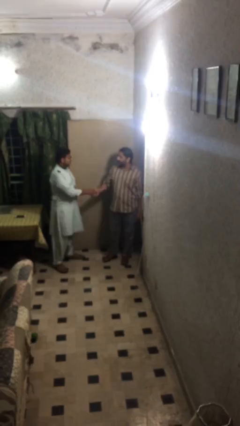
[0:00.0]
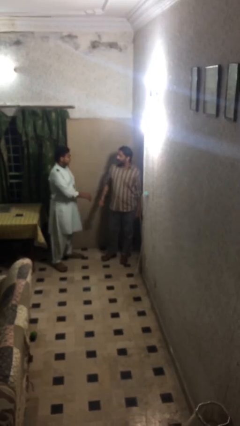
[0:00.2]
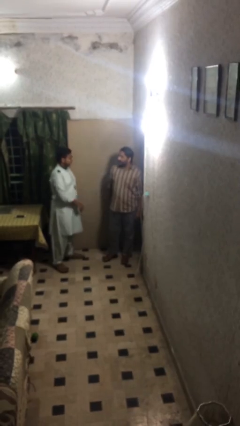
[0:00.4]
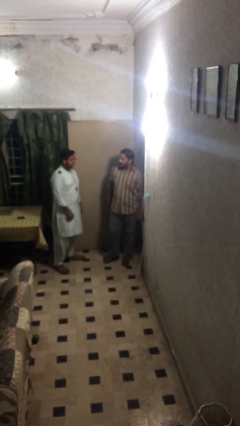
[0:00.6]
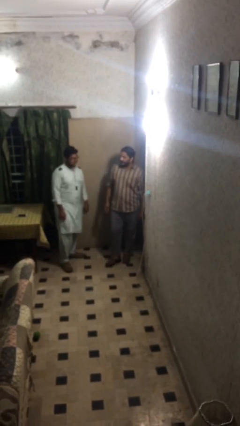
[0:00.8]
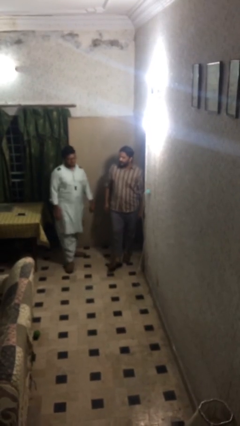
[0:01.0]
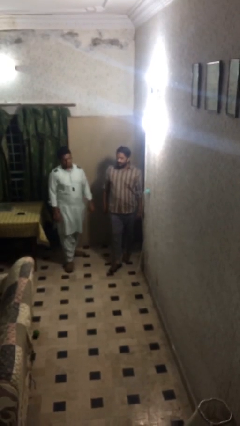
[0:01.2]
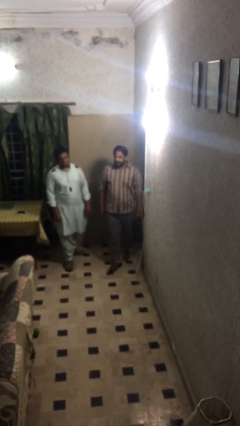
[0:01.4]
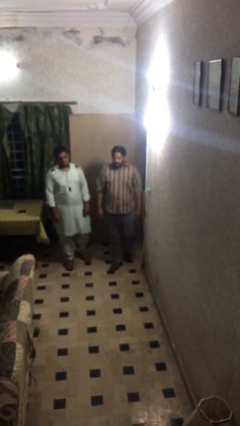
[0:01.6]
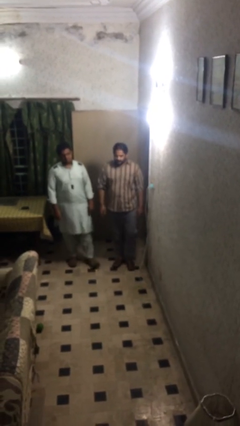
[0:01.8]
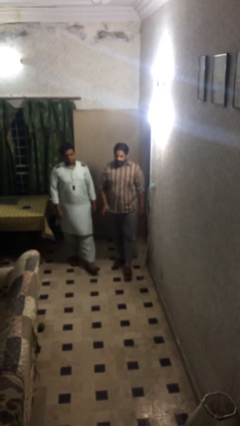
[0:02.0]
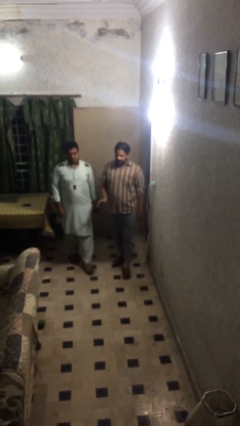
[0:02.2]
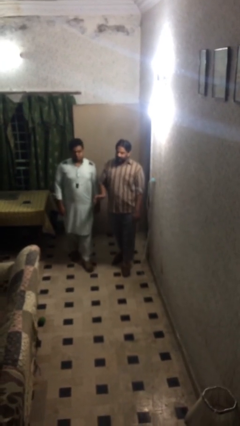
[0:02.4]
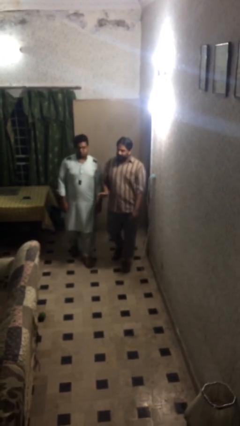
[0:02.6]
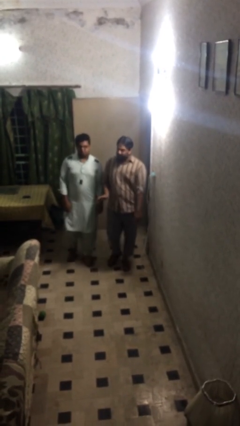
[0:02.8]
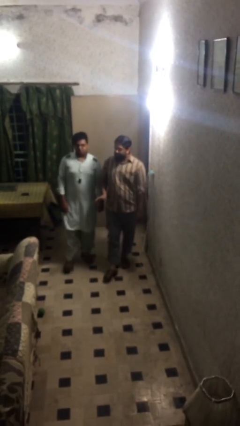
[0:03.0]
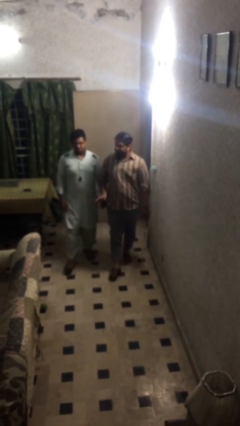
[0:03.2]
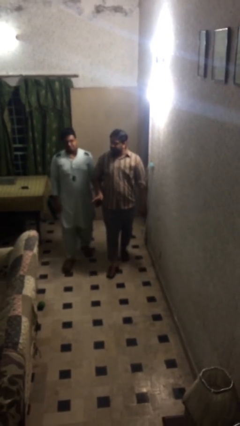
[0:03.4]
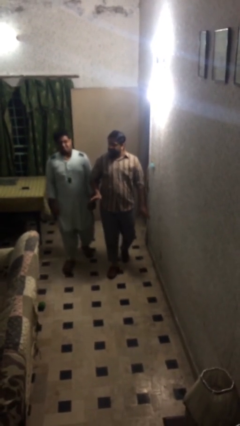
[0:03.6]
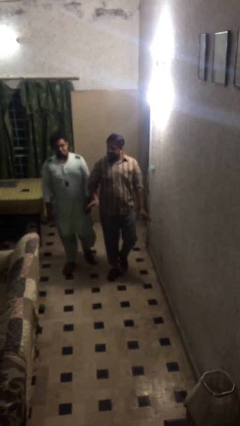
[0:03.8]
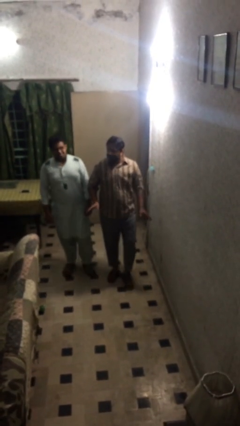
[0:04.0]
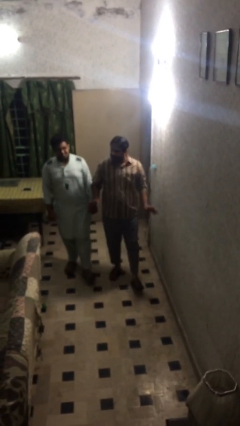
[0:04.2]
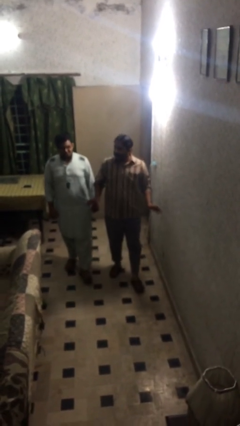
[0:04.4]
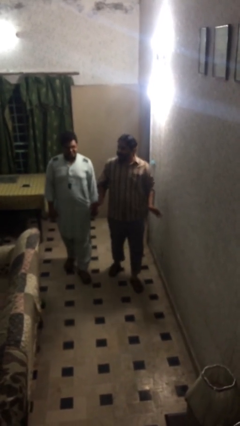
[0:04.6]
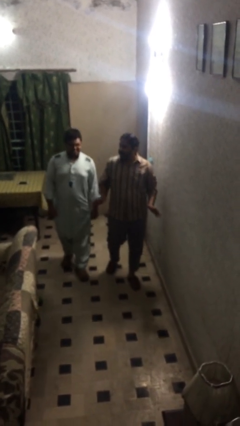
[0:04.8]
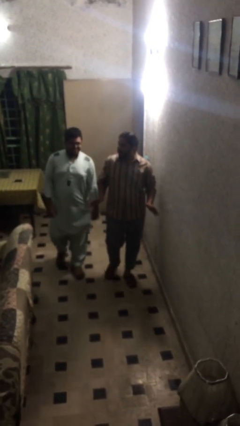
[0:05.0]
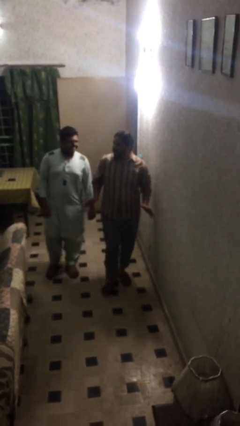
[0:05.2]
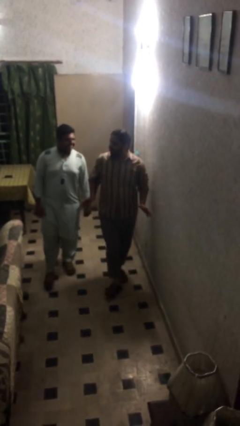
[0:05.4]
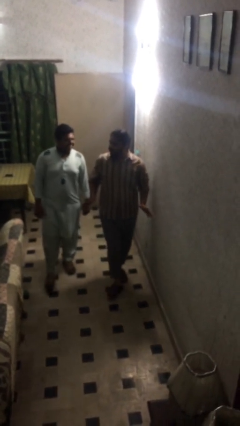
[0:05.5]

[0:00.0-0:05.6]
person talks to person

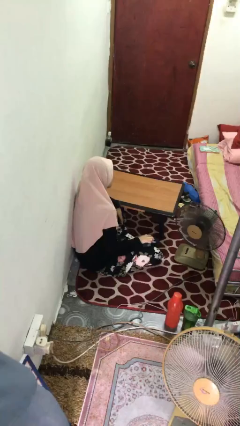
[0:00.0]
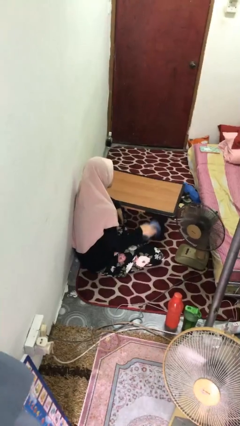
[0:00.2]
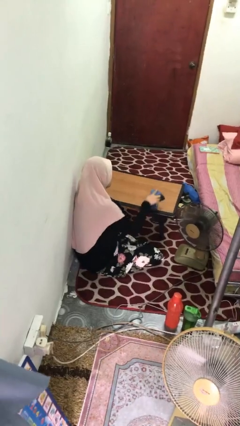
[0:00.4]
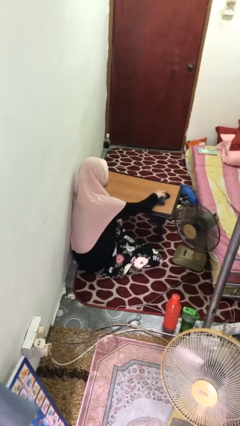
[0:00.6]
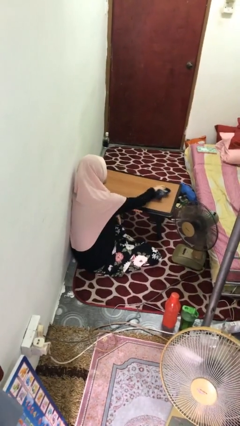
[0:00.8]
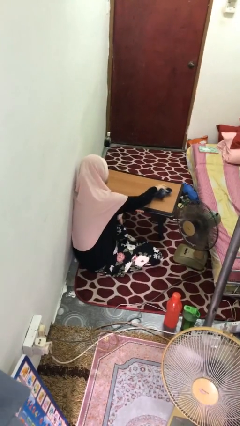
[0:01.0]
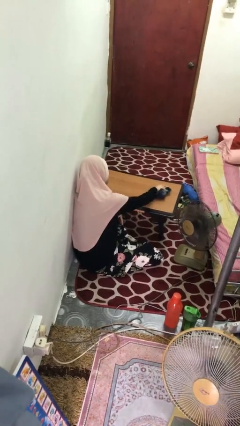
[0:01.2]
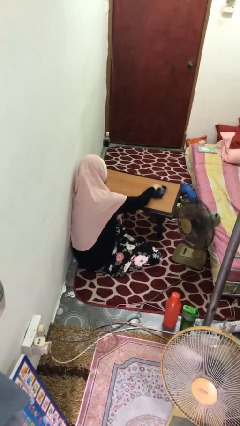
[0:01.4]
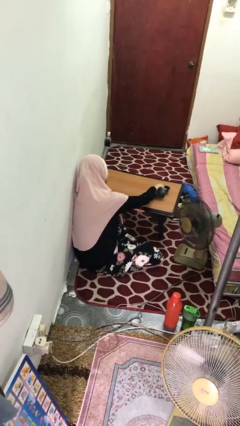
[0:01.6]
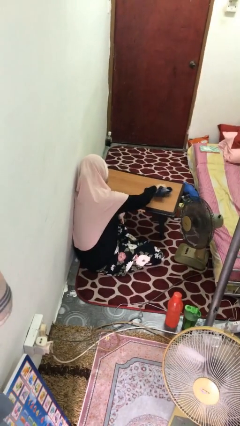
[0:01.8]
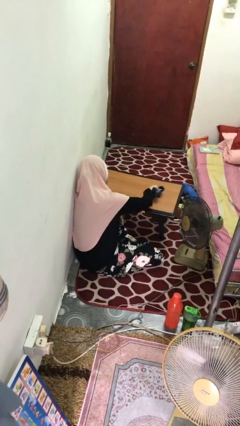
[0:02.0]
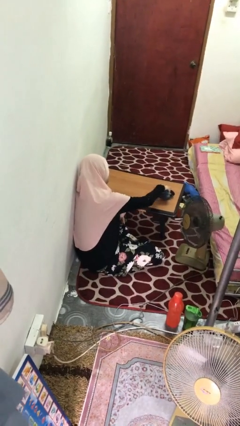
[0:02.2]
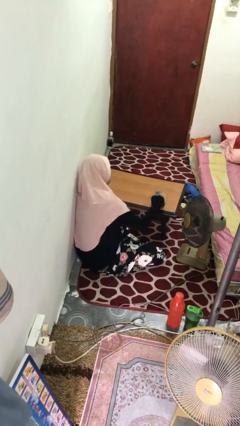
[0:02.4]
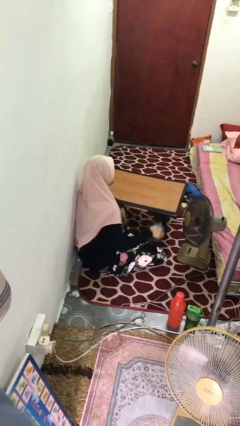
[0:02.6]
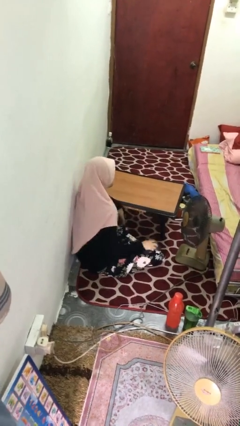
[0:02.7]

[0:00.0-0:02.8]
person cleans table with rag

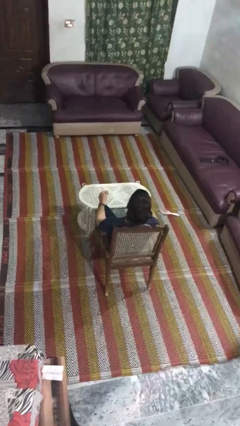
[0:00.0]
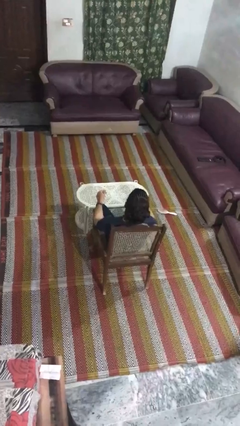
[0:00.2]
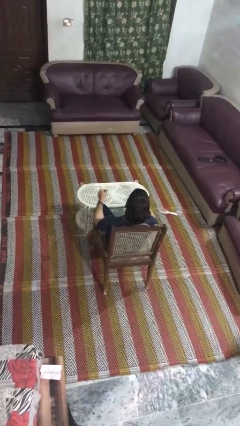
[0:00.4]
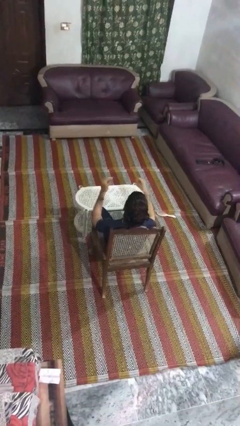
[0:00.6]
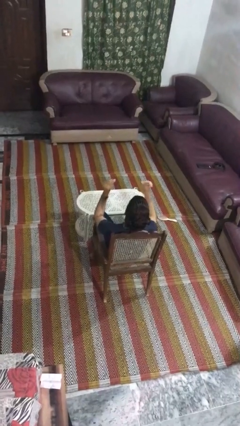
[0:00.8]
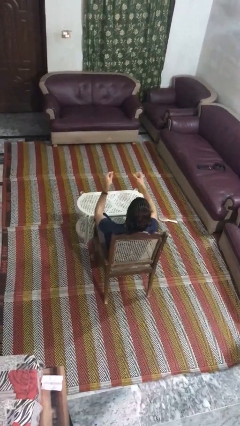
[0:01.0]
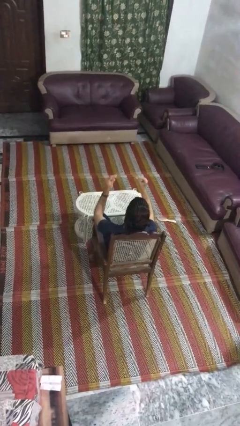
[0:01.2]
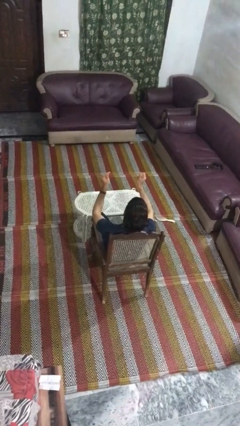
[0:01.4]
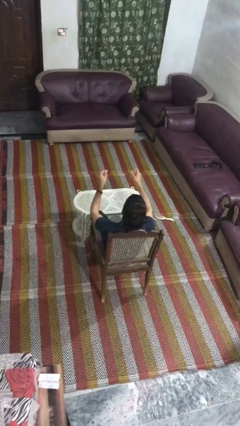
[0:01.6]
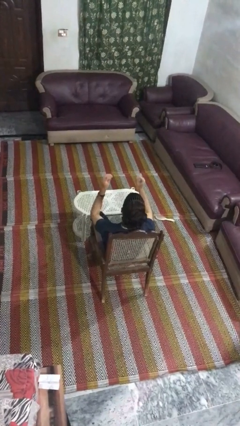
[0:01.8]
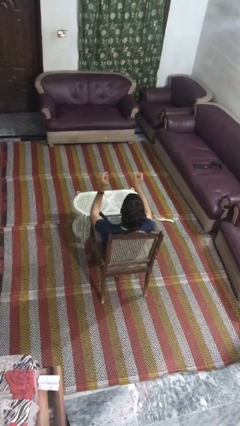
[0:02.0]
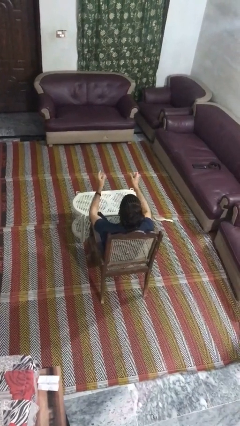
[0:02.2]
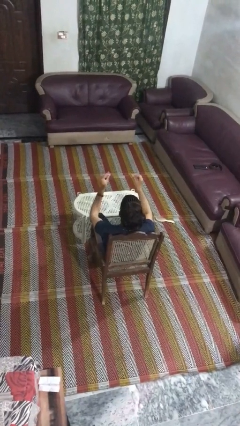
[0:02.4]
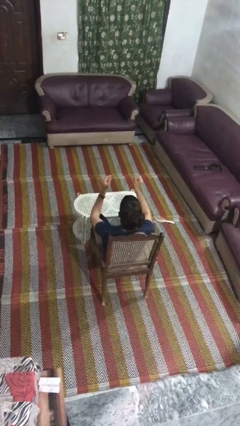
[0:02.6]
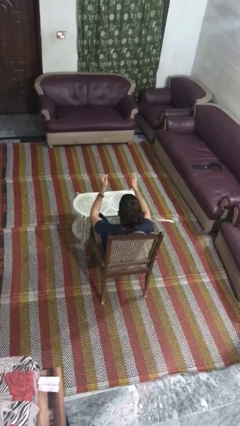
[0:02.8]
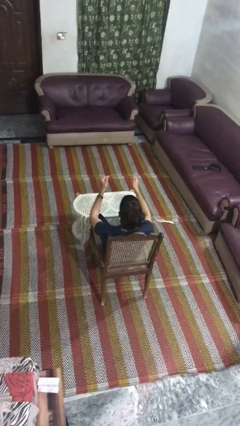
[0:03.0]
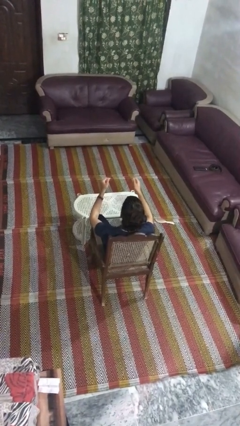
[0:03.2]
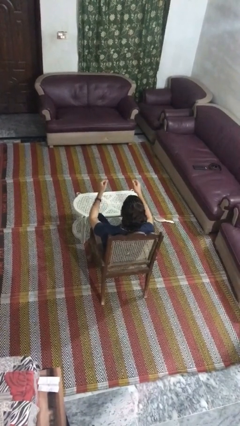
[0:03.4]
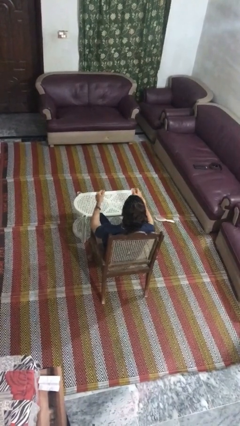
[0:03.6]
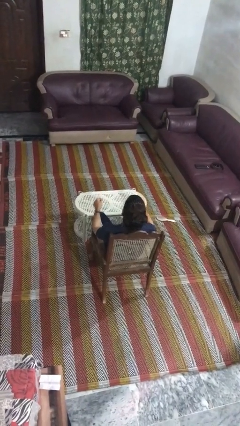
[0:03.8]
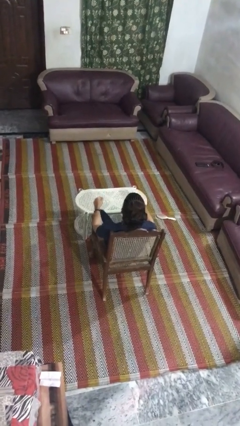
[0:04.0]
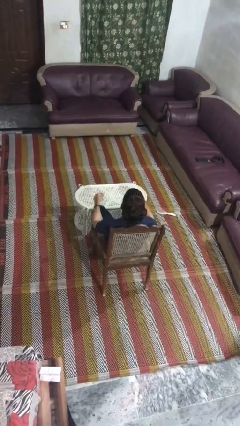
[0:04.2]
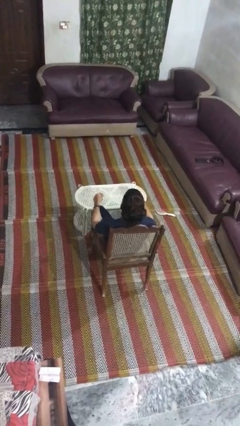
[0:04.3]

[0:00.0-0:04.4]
person snaps fingers

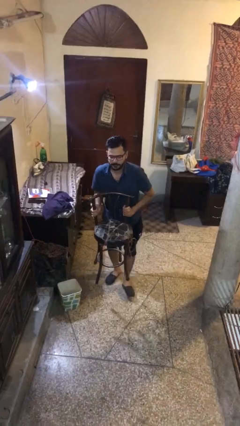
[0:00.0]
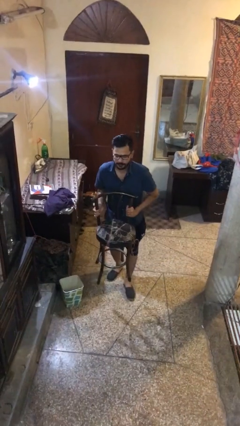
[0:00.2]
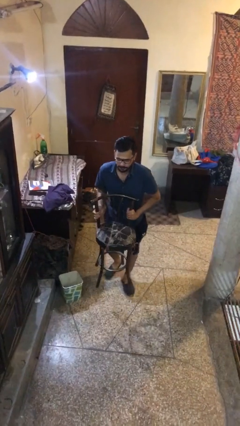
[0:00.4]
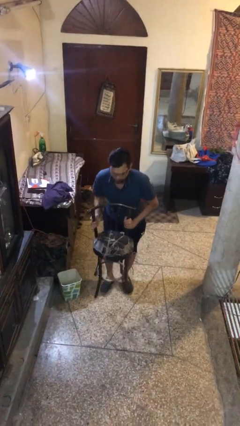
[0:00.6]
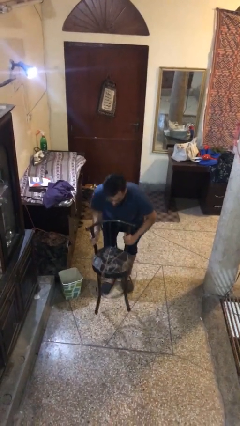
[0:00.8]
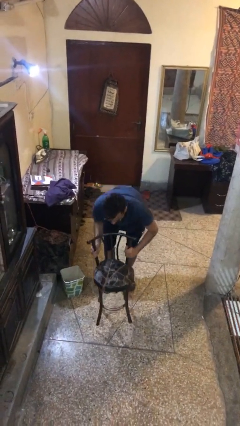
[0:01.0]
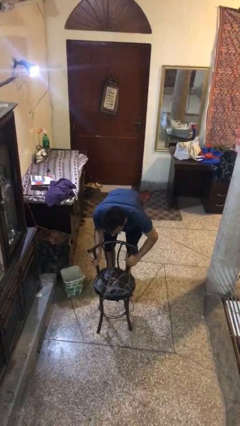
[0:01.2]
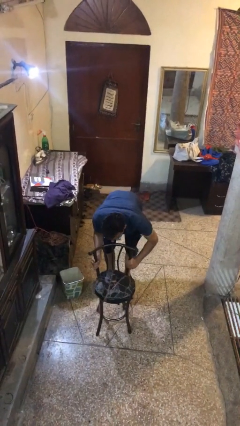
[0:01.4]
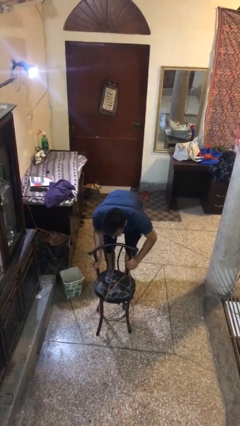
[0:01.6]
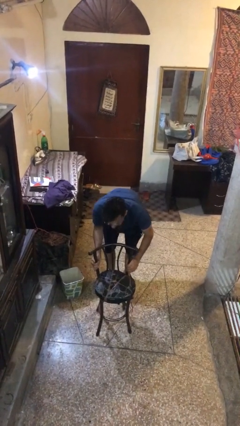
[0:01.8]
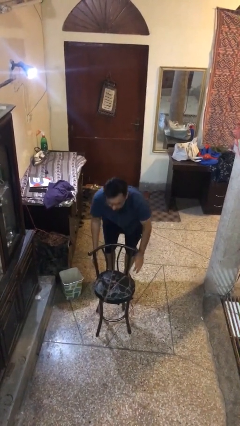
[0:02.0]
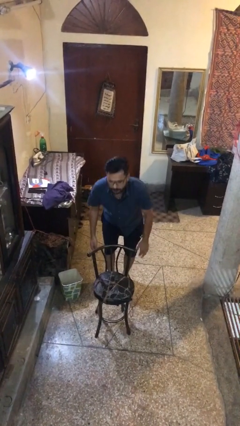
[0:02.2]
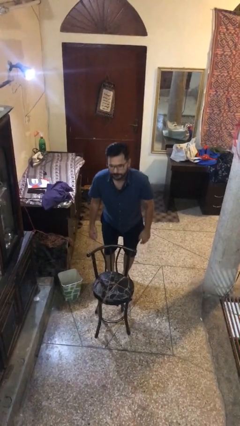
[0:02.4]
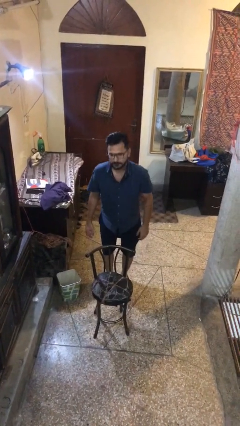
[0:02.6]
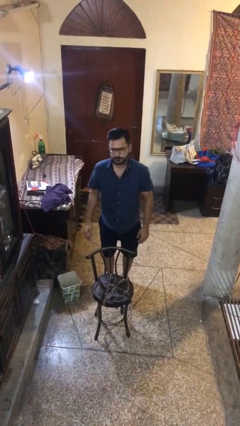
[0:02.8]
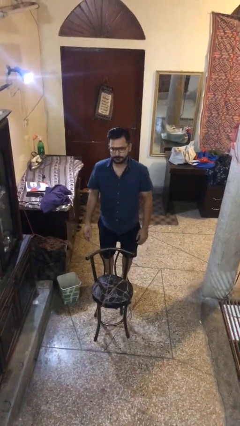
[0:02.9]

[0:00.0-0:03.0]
person puts down object on floor

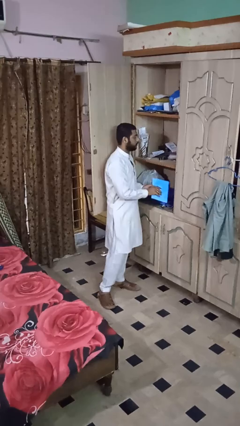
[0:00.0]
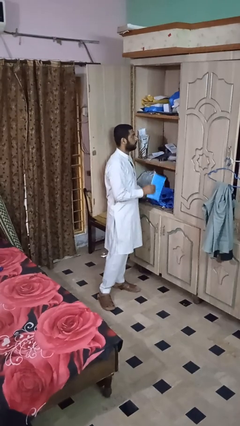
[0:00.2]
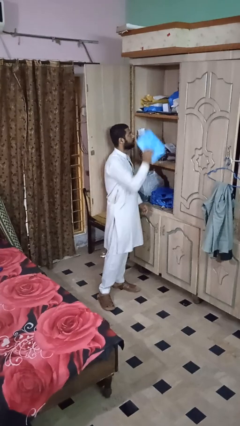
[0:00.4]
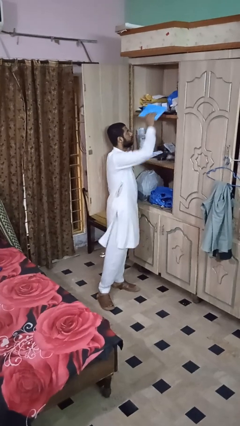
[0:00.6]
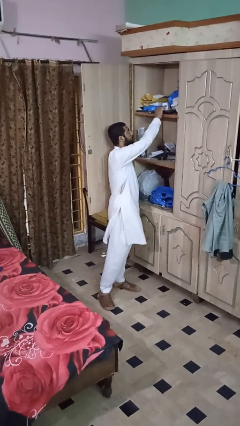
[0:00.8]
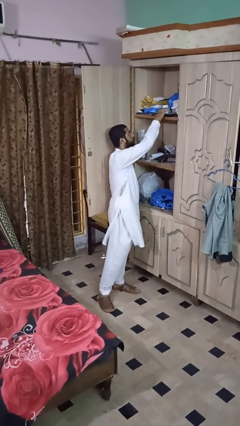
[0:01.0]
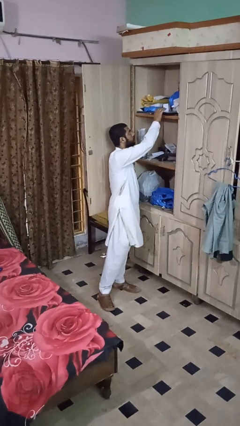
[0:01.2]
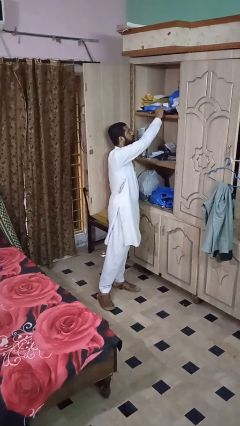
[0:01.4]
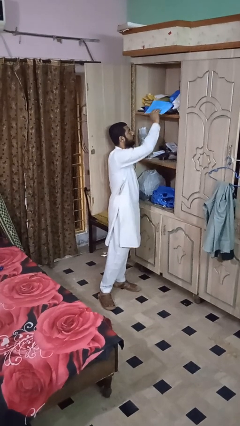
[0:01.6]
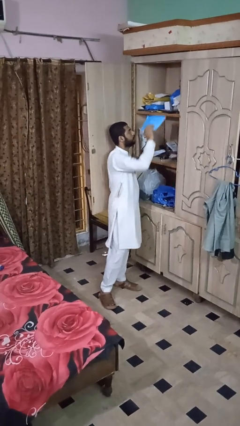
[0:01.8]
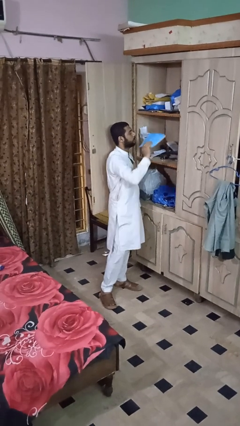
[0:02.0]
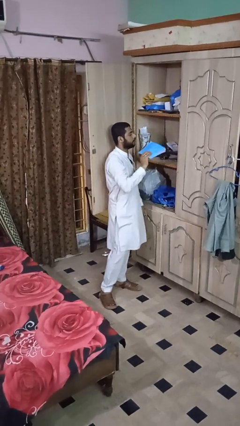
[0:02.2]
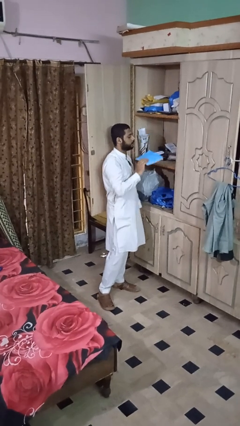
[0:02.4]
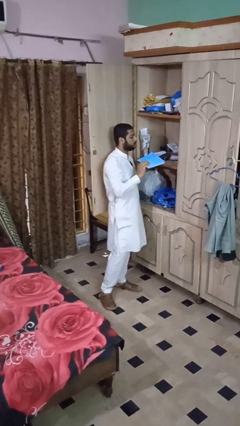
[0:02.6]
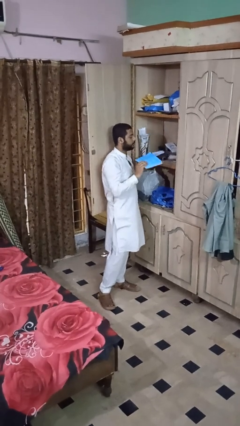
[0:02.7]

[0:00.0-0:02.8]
person picks up object from shelf
